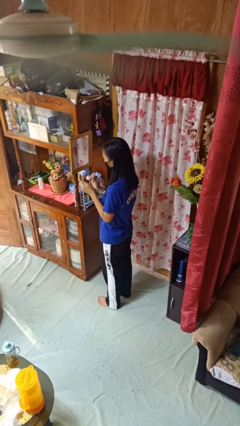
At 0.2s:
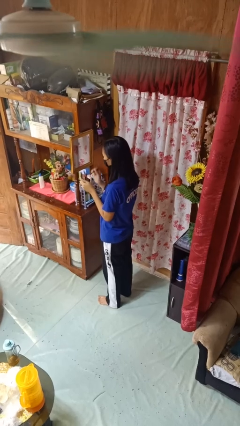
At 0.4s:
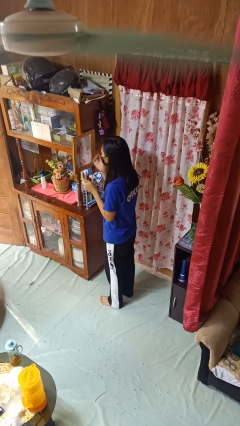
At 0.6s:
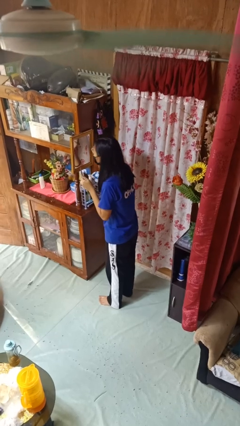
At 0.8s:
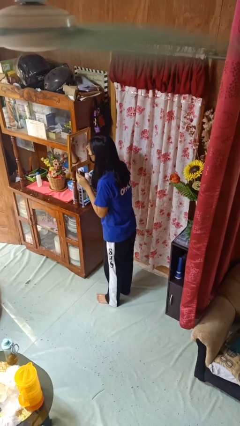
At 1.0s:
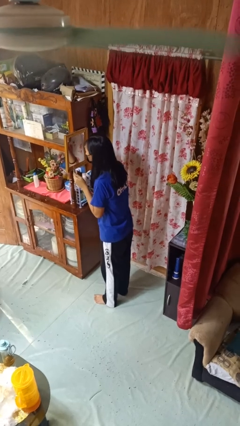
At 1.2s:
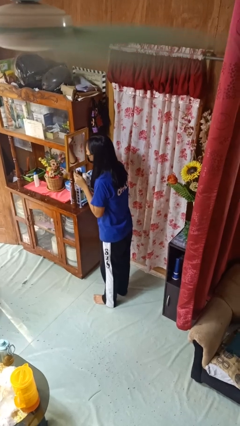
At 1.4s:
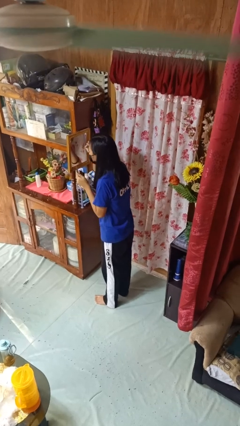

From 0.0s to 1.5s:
person applies eye makeup

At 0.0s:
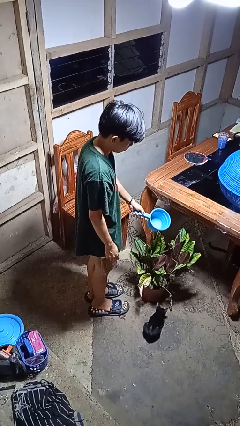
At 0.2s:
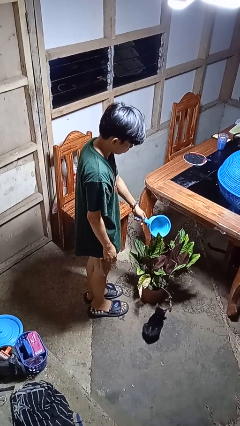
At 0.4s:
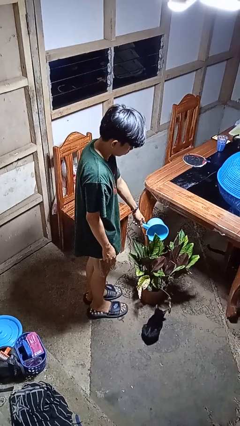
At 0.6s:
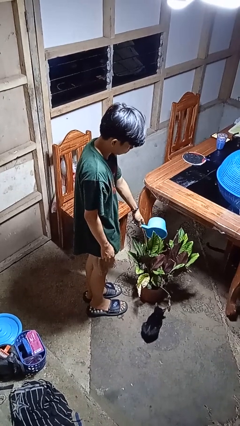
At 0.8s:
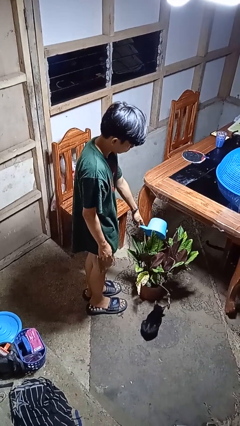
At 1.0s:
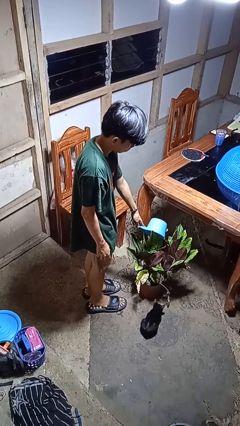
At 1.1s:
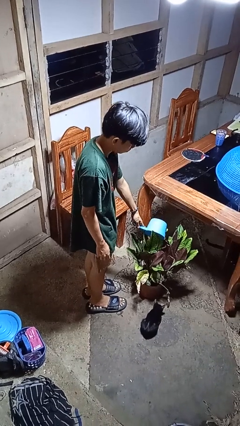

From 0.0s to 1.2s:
person waters houseplant

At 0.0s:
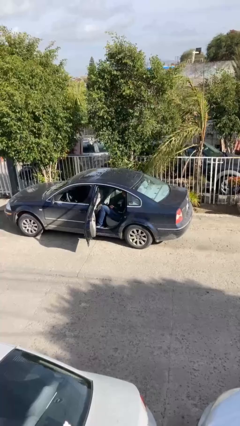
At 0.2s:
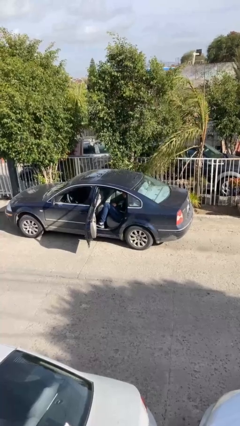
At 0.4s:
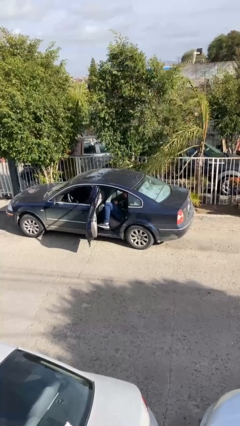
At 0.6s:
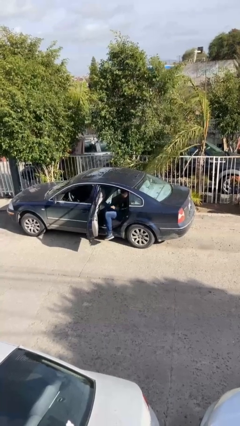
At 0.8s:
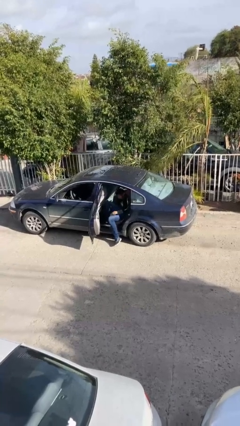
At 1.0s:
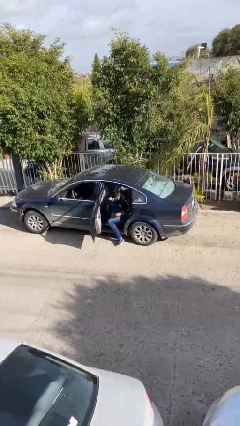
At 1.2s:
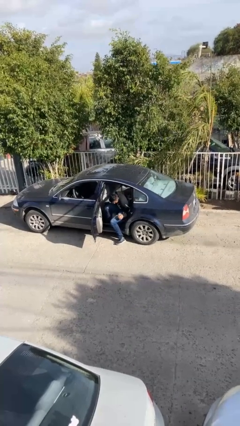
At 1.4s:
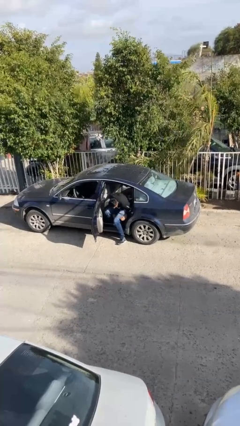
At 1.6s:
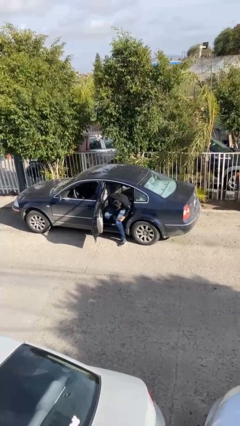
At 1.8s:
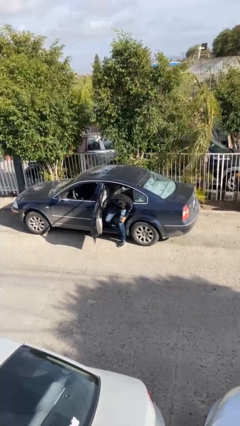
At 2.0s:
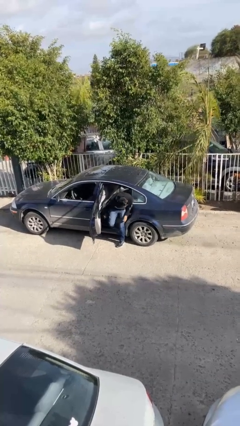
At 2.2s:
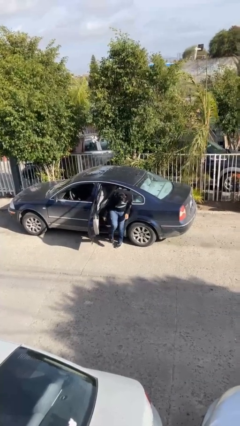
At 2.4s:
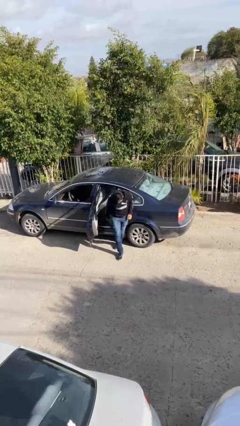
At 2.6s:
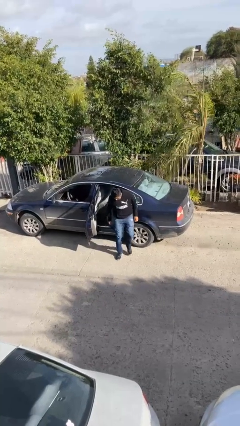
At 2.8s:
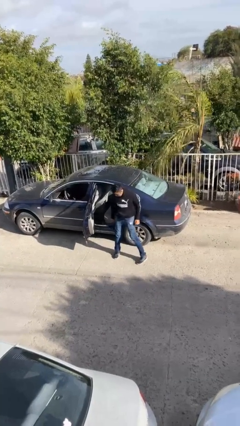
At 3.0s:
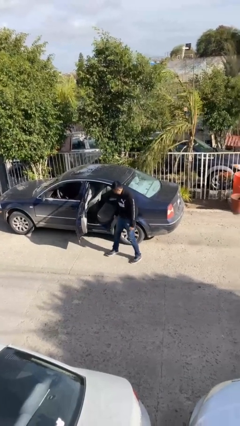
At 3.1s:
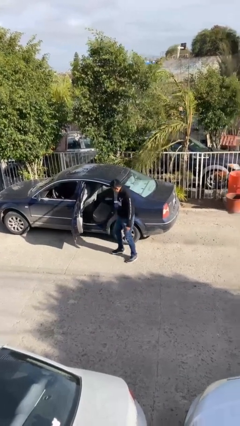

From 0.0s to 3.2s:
person exits car

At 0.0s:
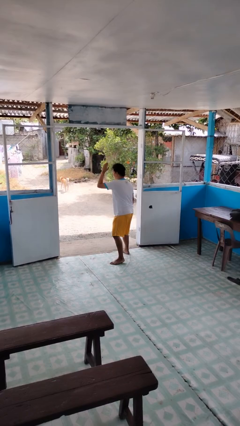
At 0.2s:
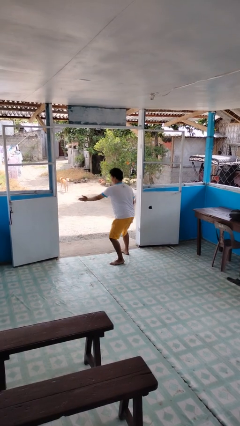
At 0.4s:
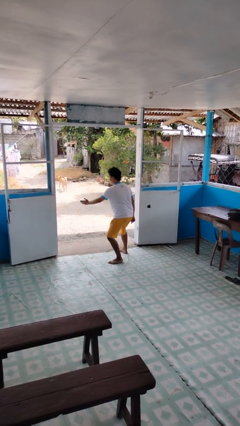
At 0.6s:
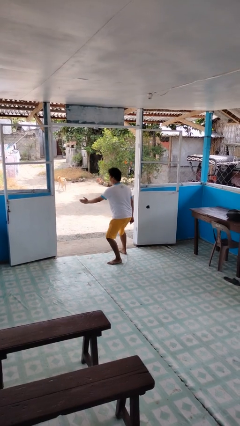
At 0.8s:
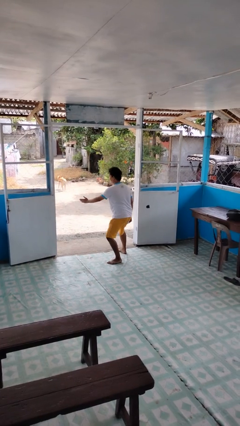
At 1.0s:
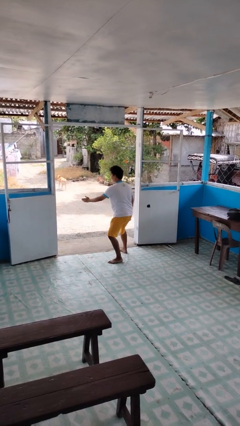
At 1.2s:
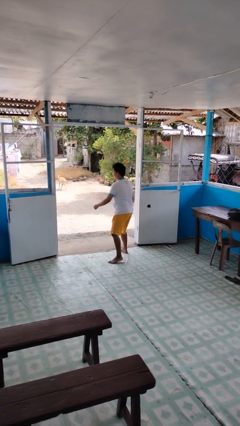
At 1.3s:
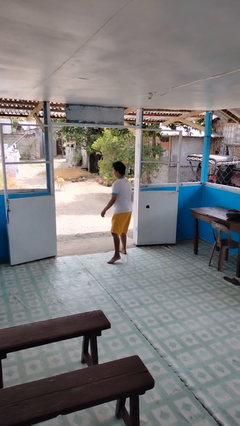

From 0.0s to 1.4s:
person karate chop

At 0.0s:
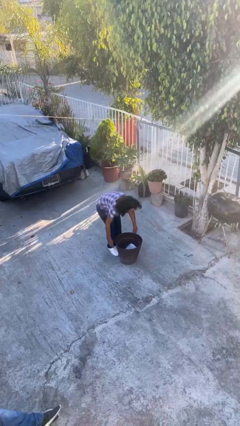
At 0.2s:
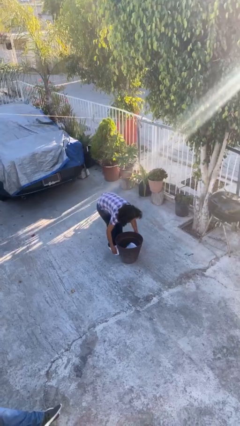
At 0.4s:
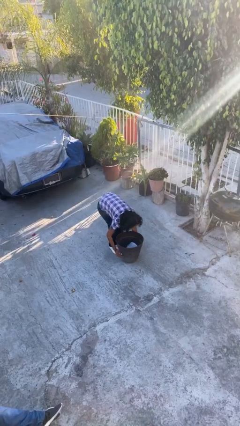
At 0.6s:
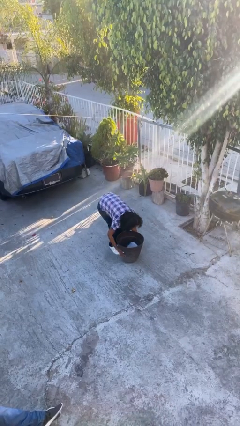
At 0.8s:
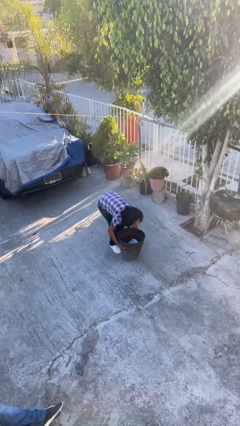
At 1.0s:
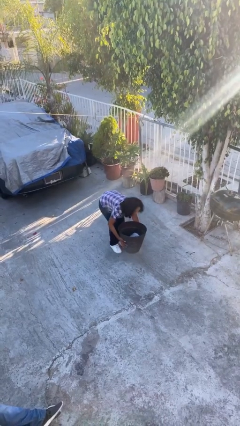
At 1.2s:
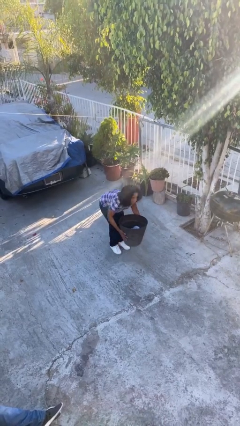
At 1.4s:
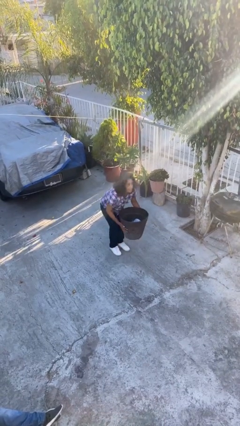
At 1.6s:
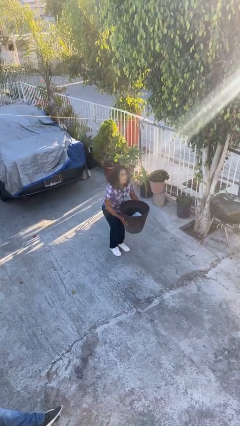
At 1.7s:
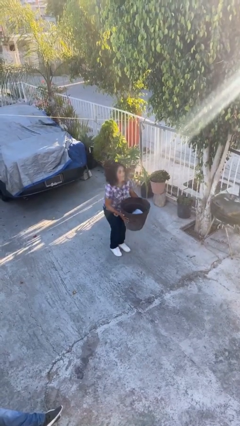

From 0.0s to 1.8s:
person picks up object from floor

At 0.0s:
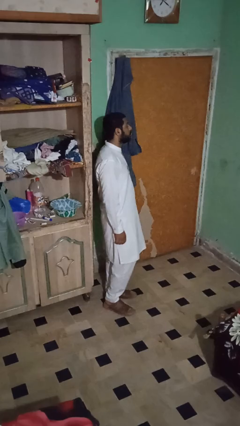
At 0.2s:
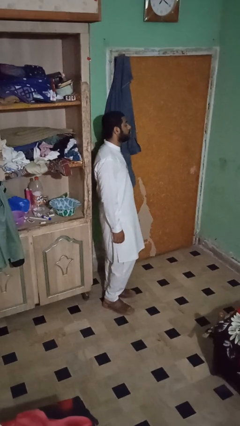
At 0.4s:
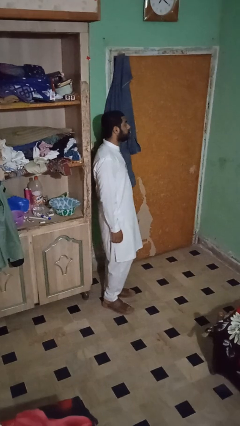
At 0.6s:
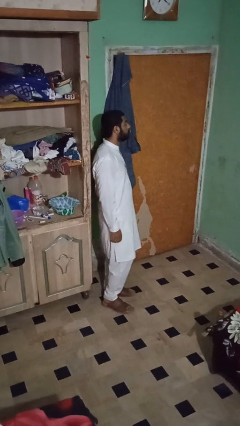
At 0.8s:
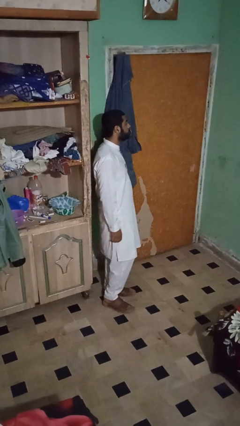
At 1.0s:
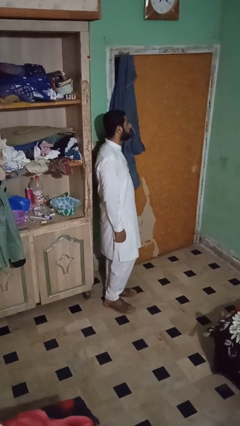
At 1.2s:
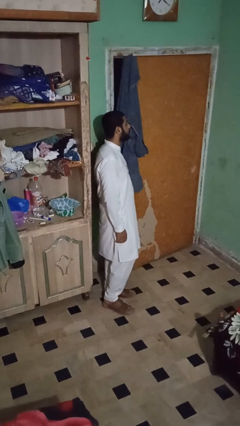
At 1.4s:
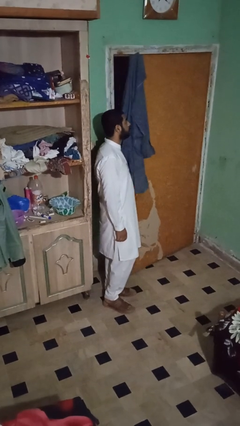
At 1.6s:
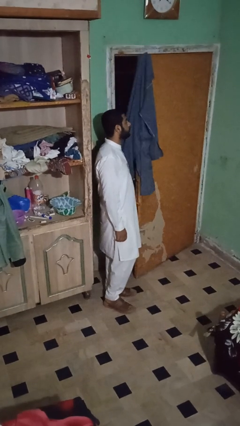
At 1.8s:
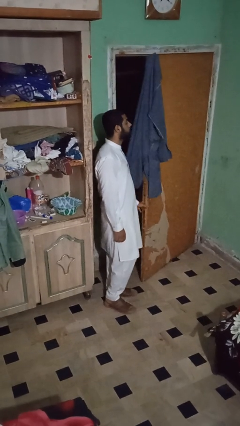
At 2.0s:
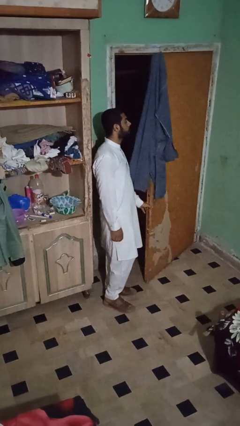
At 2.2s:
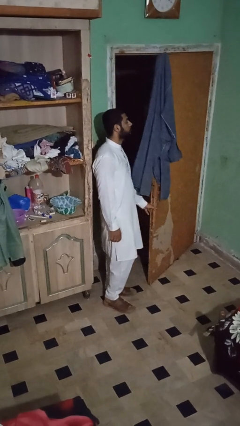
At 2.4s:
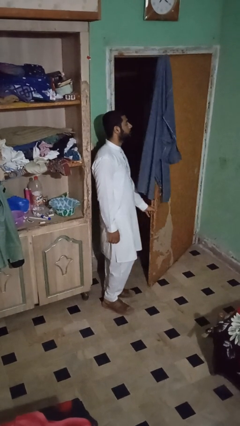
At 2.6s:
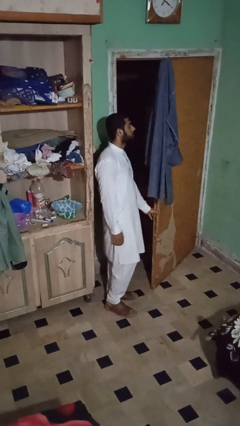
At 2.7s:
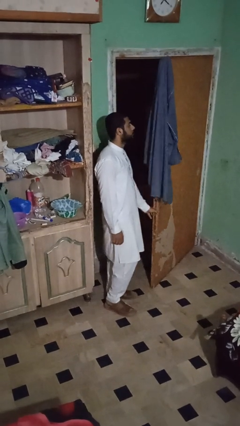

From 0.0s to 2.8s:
person opens closet door

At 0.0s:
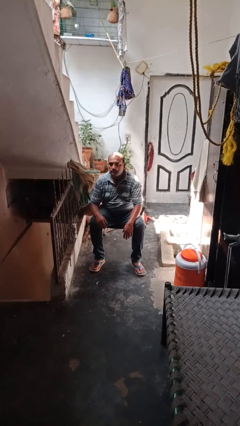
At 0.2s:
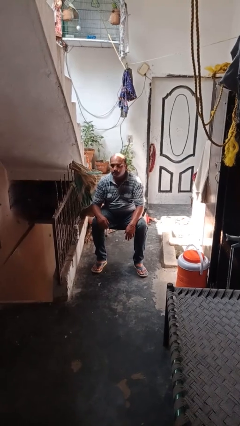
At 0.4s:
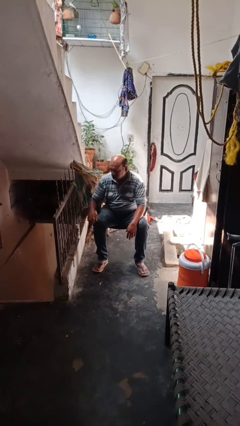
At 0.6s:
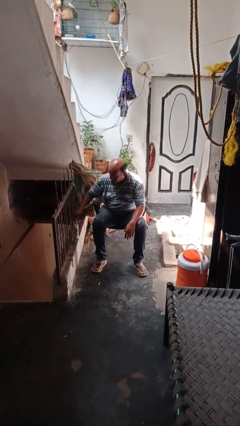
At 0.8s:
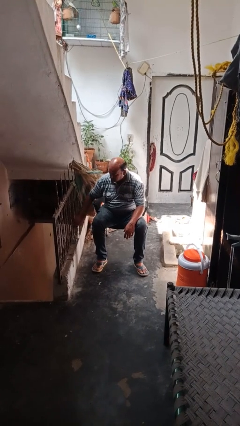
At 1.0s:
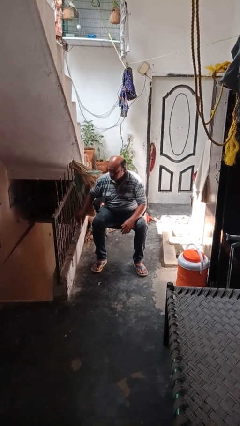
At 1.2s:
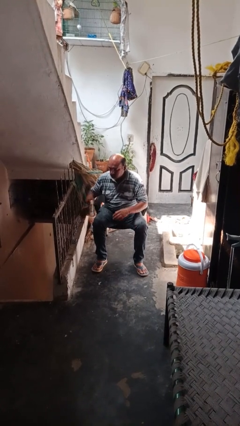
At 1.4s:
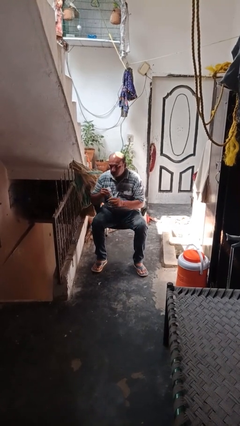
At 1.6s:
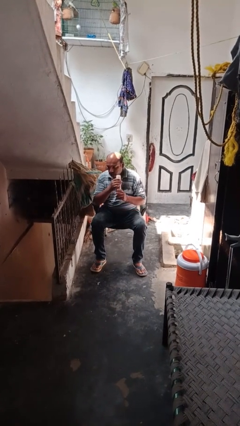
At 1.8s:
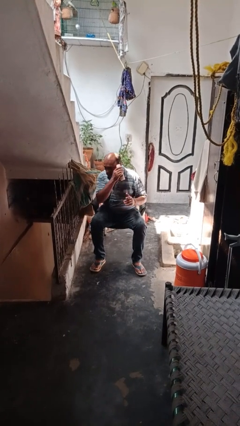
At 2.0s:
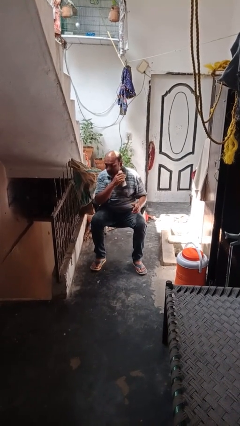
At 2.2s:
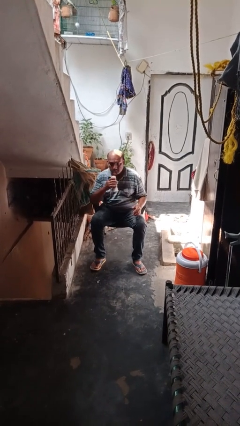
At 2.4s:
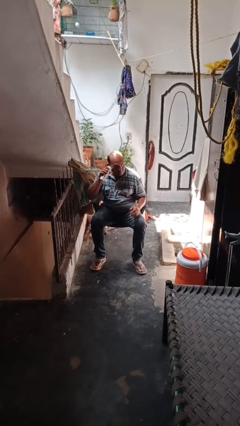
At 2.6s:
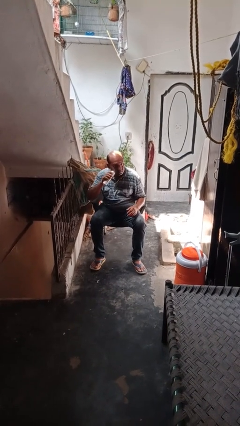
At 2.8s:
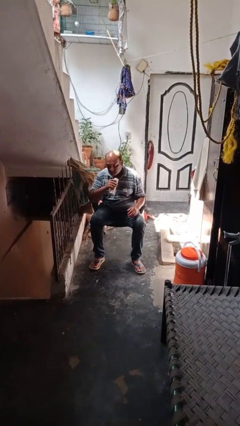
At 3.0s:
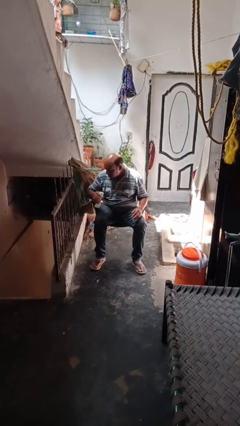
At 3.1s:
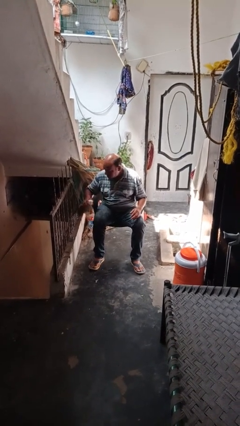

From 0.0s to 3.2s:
person applies shaving cream

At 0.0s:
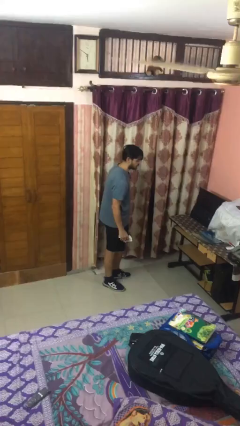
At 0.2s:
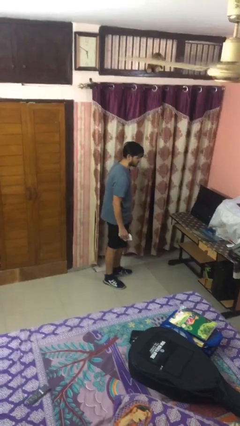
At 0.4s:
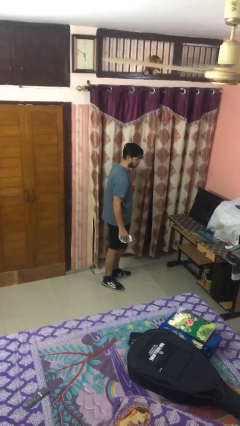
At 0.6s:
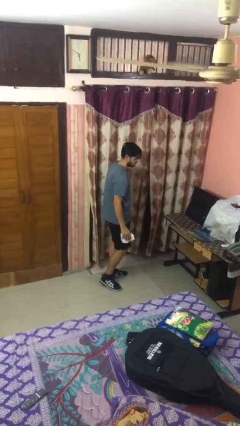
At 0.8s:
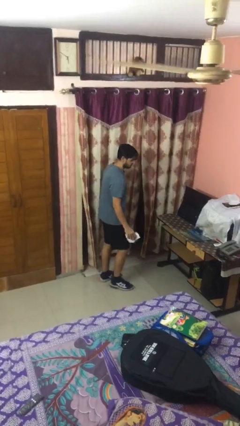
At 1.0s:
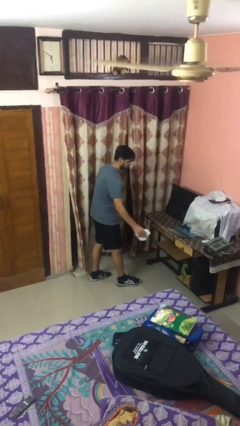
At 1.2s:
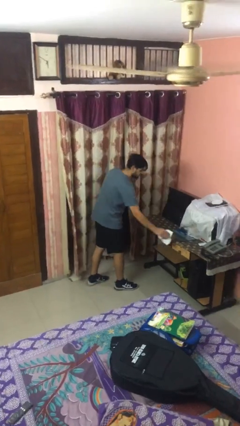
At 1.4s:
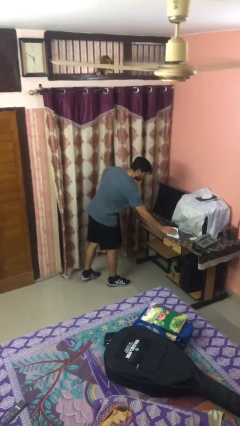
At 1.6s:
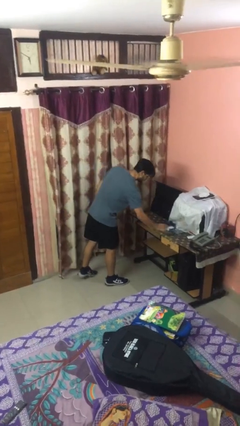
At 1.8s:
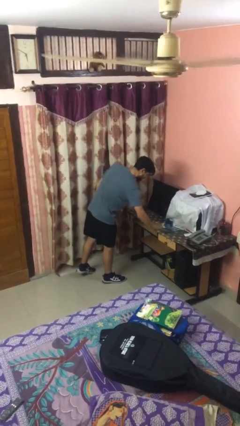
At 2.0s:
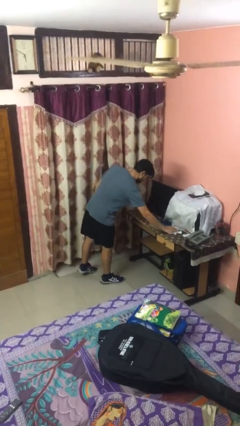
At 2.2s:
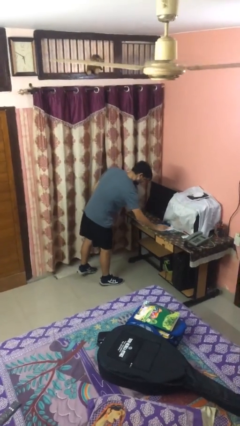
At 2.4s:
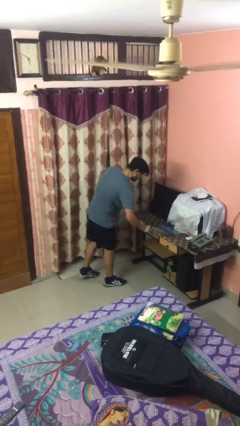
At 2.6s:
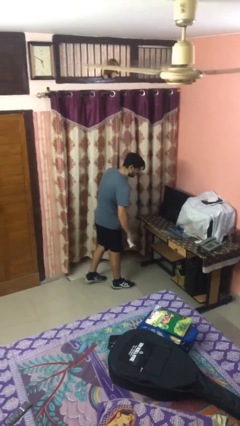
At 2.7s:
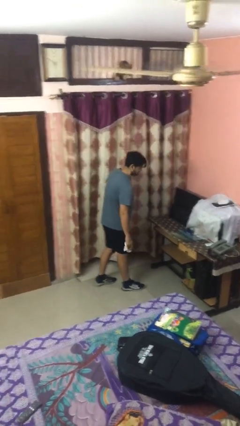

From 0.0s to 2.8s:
person cleans table with rag
